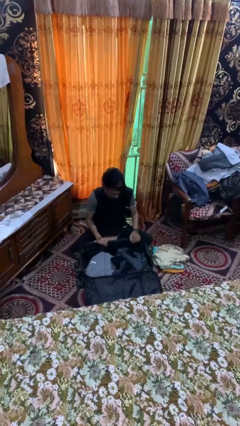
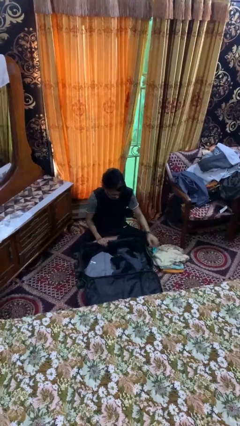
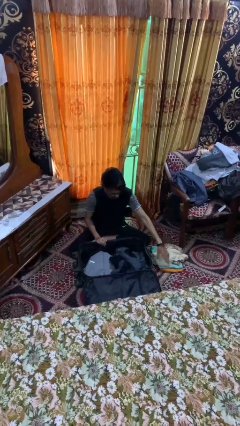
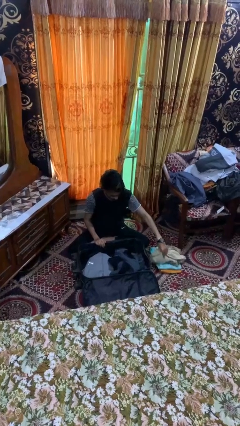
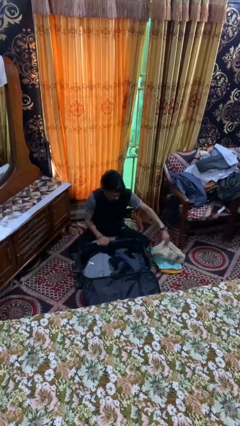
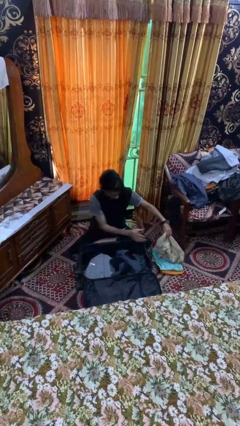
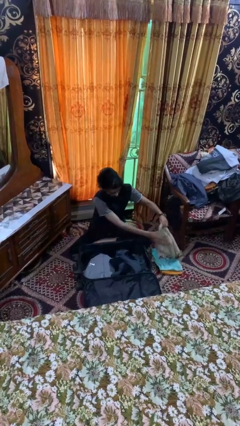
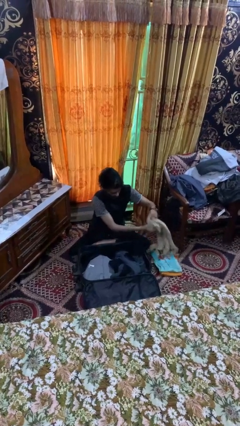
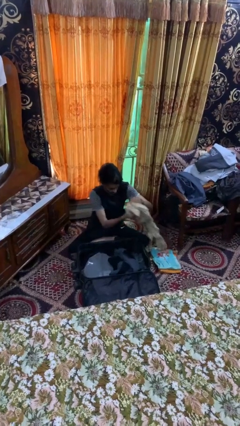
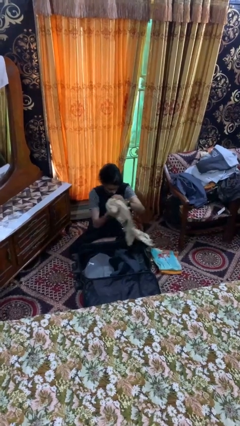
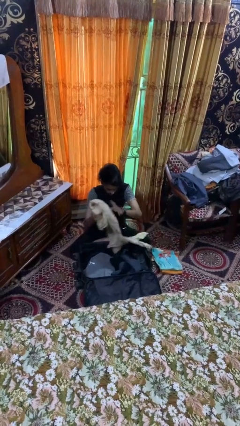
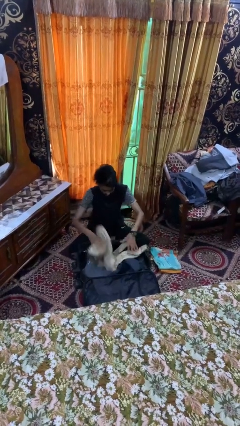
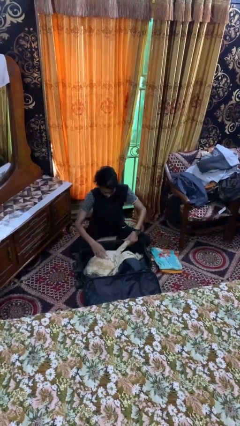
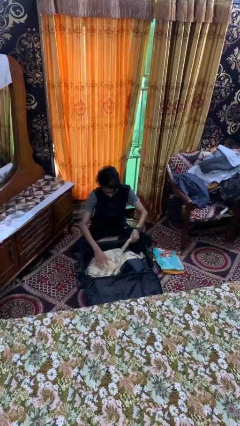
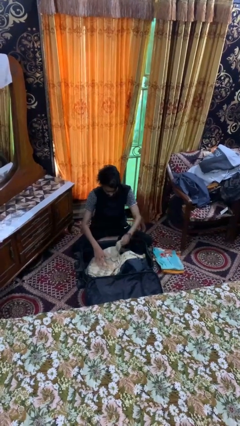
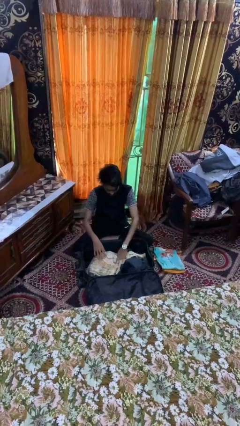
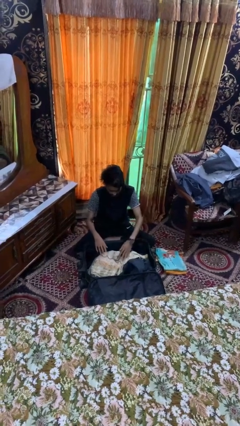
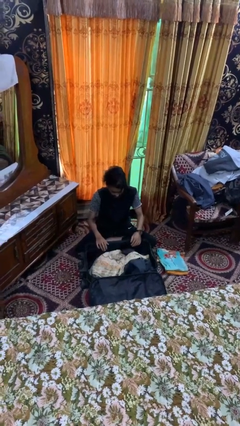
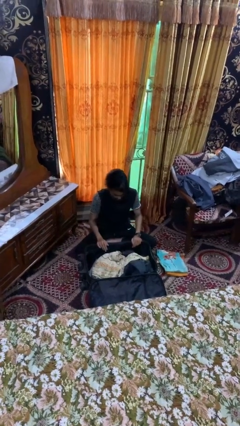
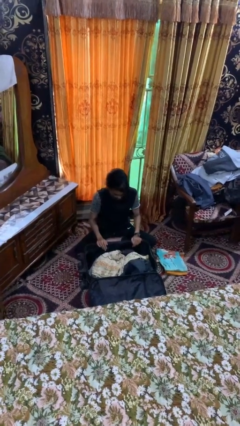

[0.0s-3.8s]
person loads clothes into suitcase

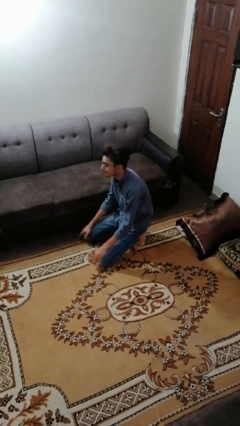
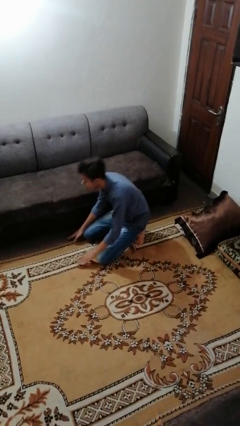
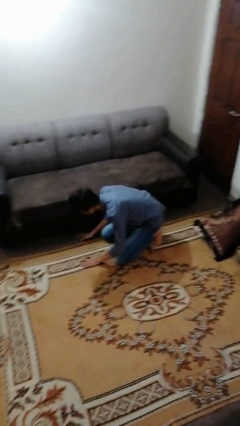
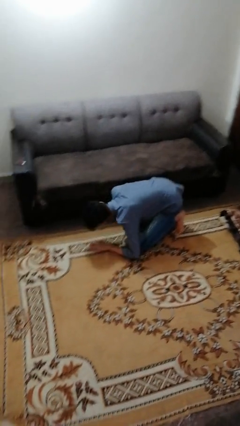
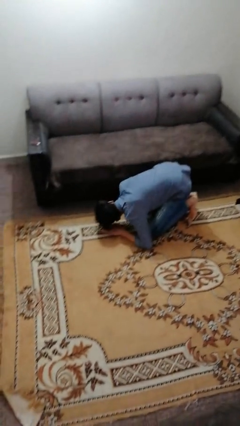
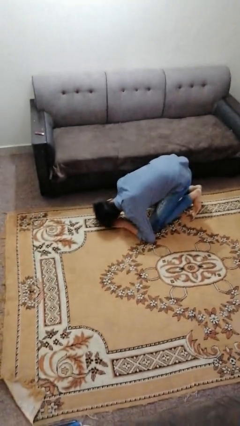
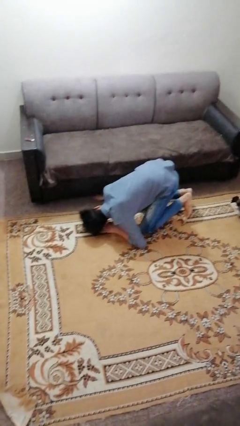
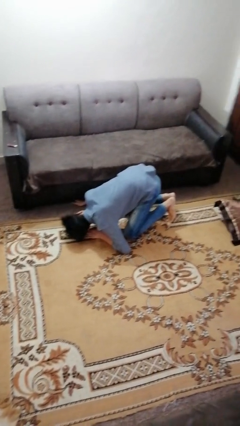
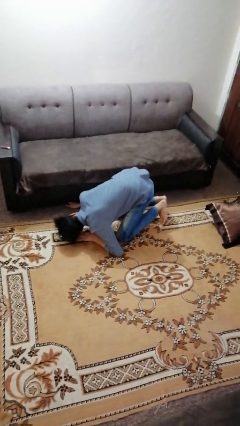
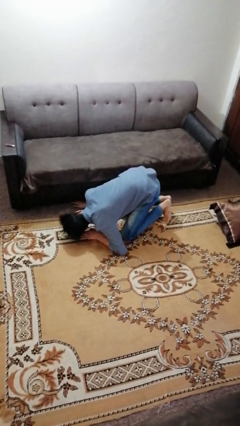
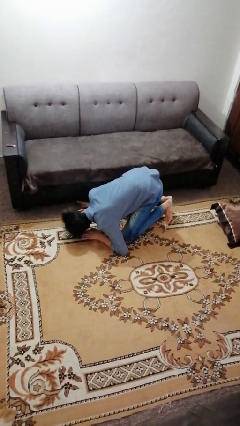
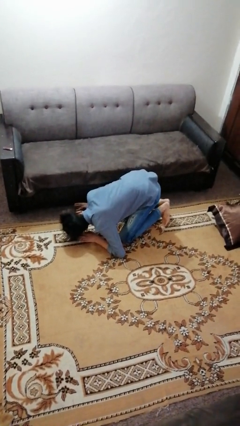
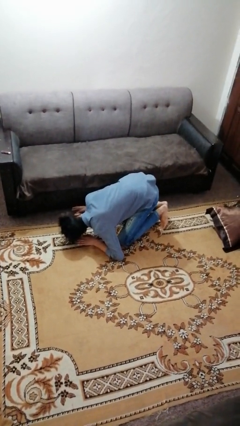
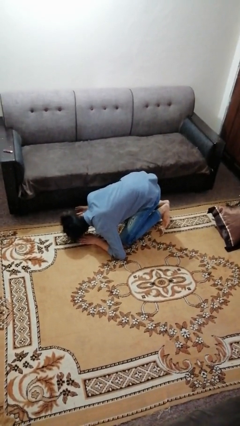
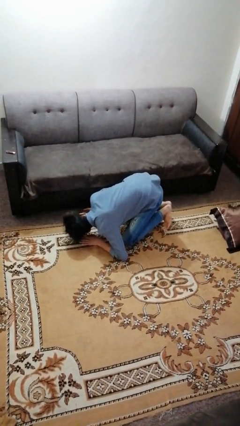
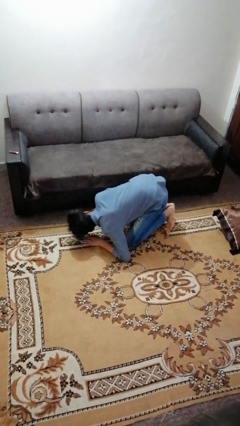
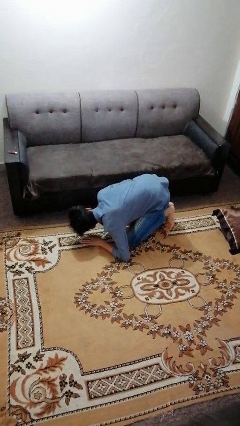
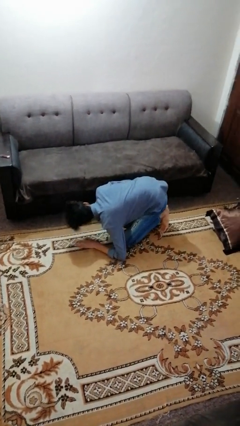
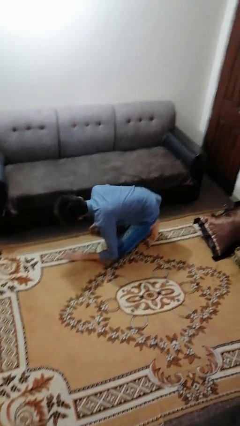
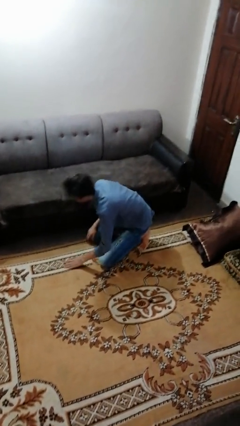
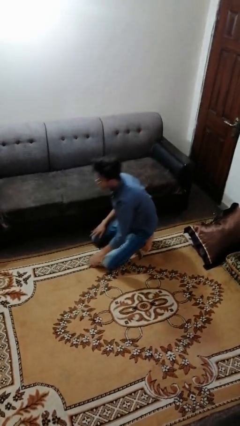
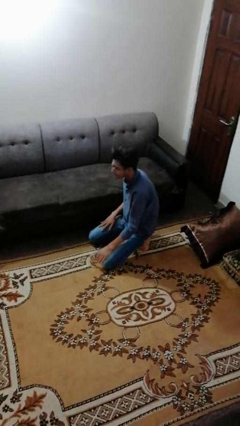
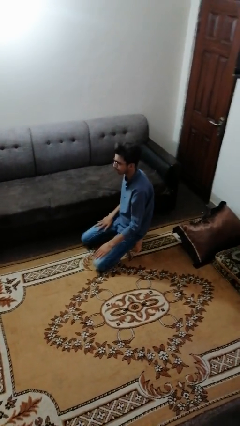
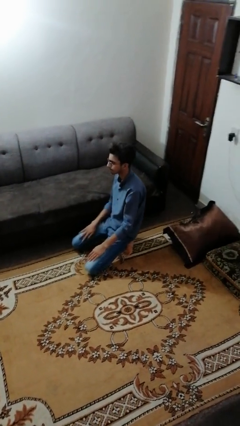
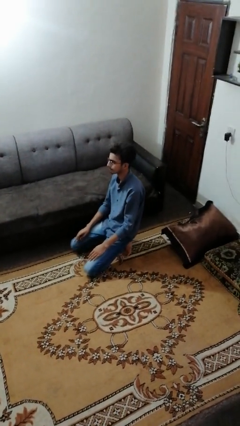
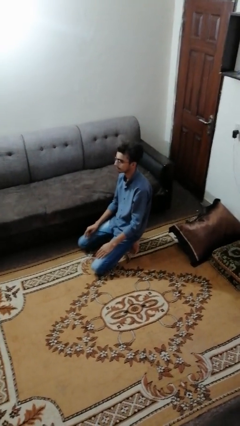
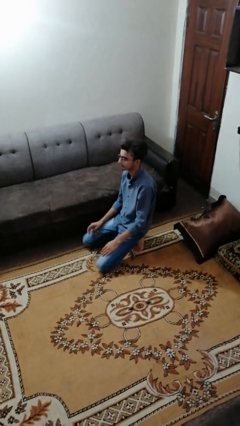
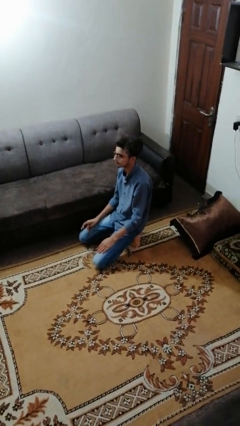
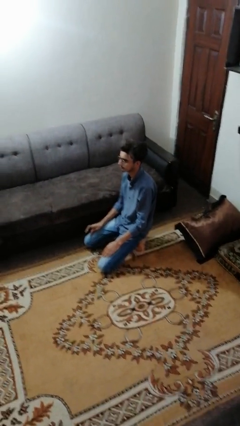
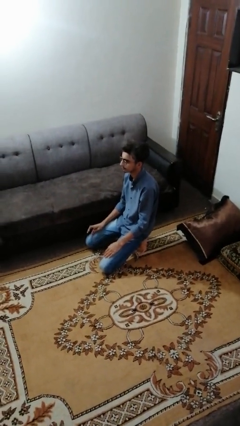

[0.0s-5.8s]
person searches under couch

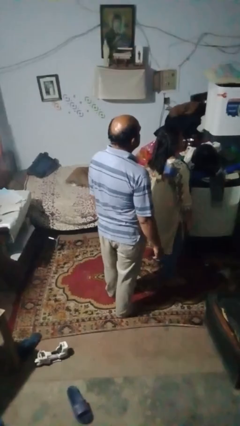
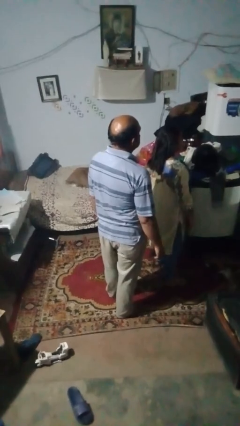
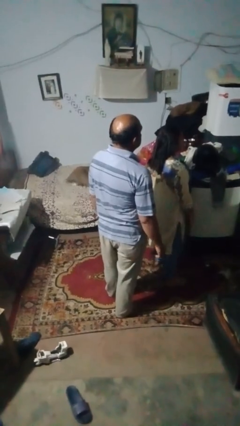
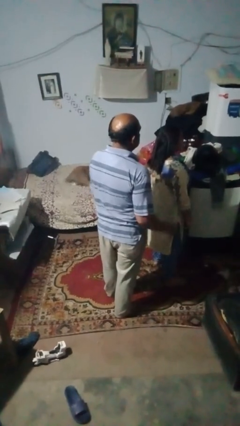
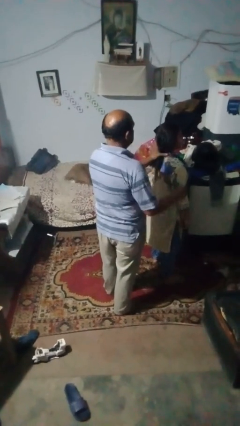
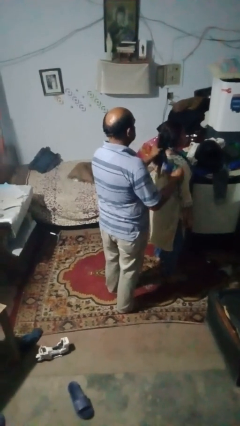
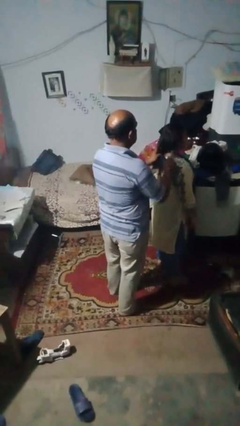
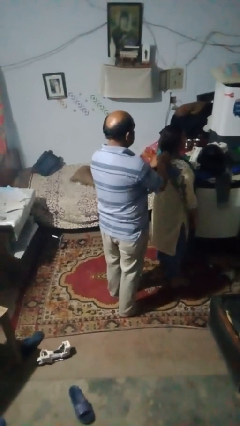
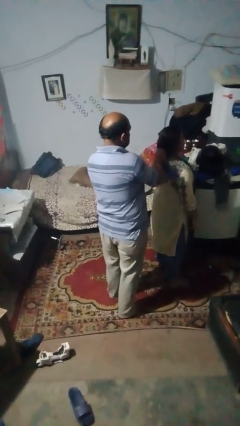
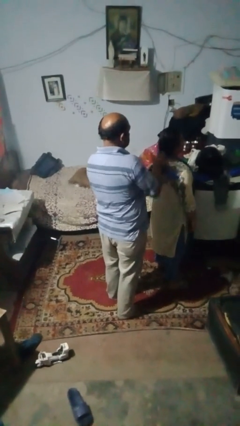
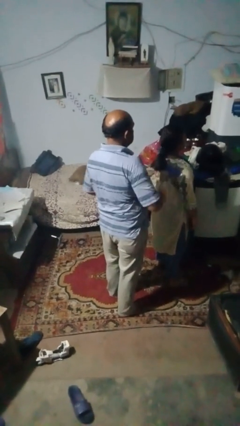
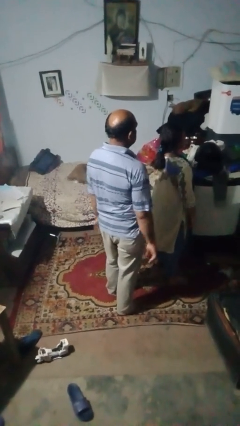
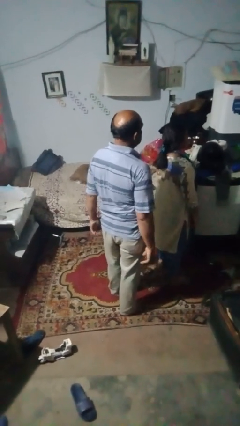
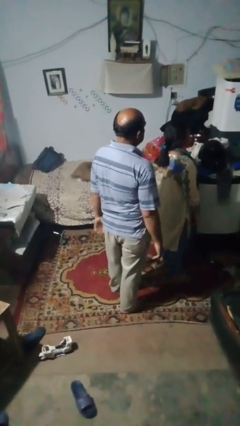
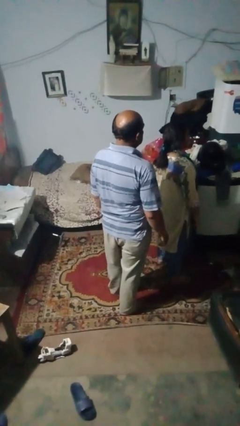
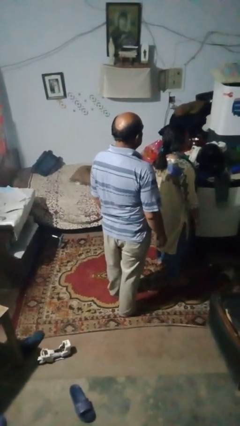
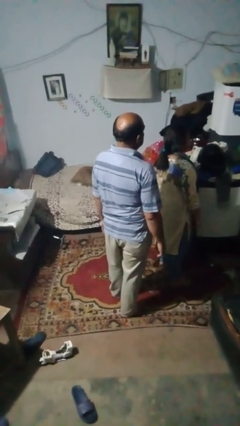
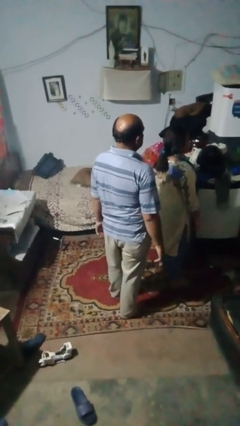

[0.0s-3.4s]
person braids hair of person

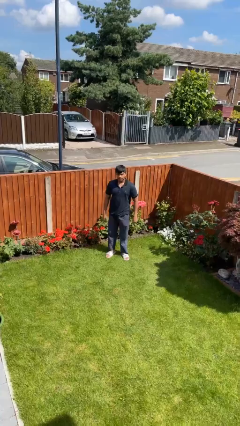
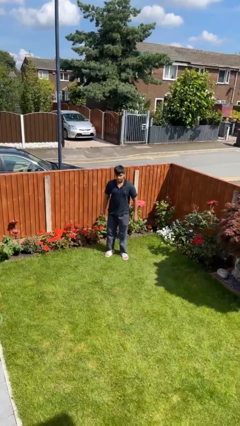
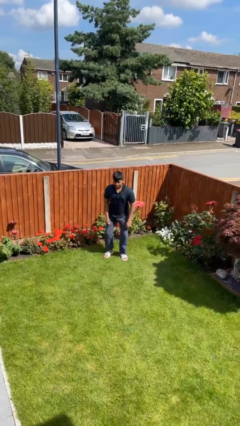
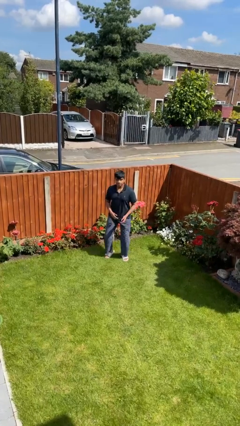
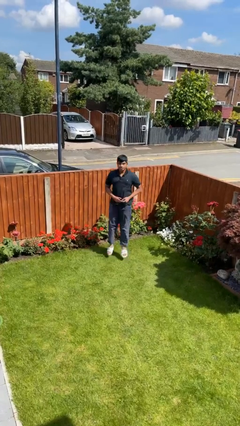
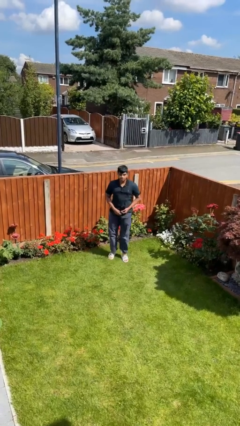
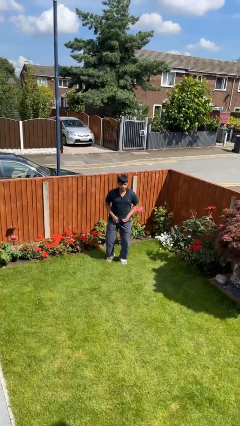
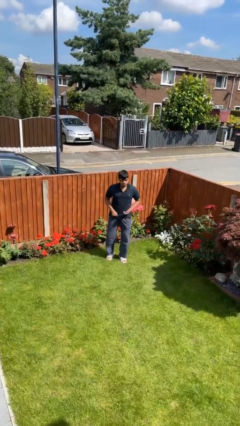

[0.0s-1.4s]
person jumps

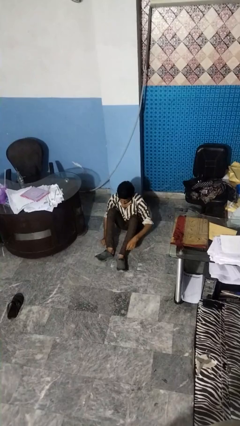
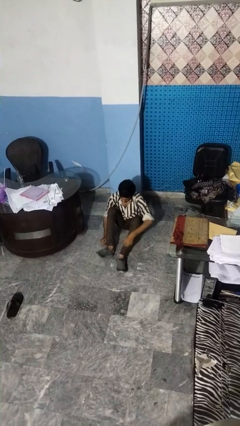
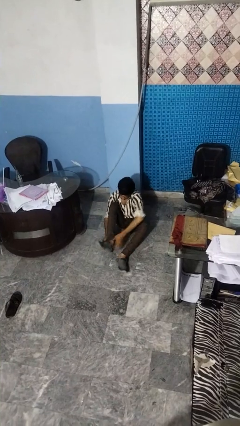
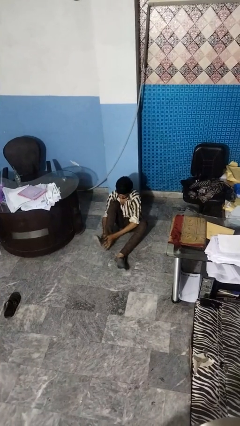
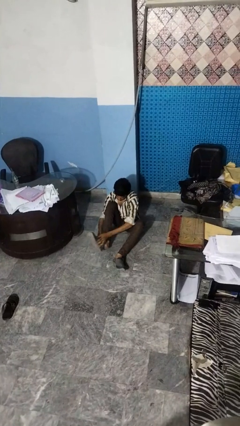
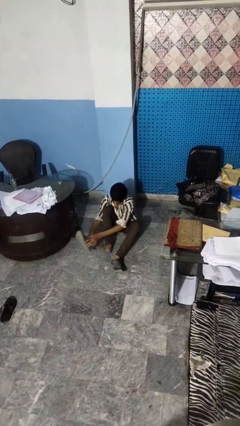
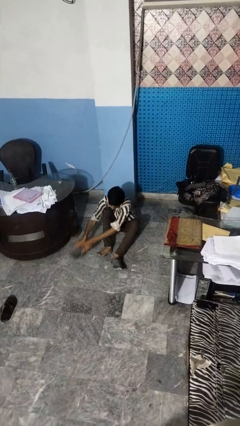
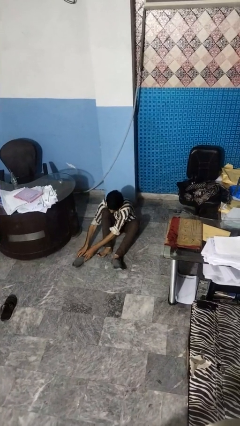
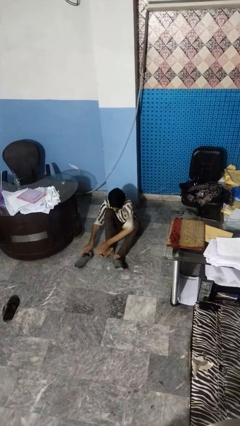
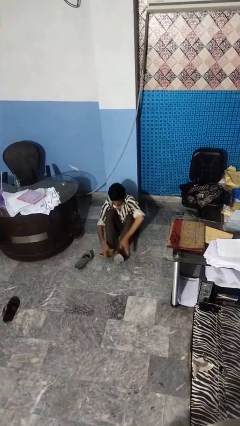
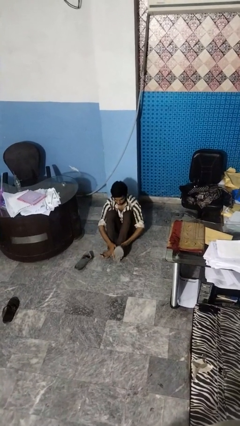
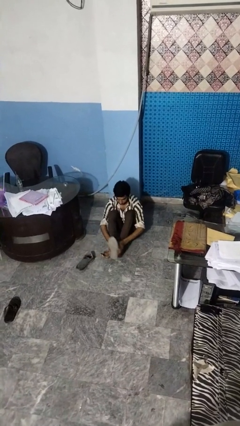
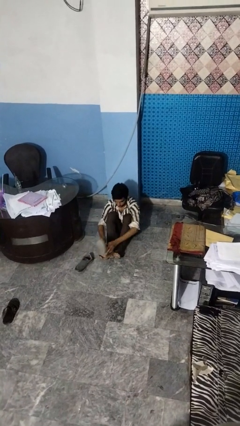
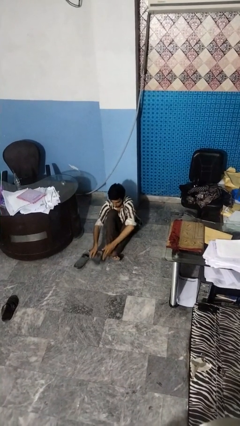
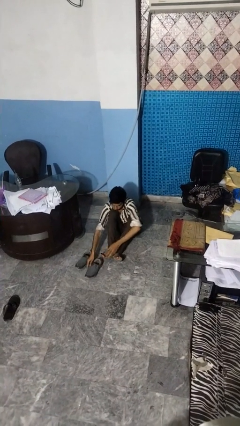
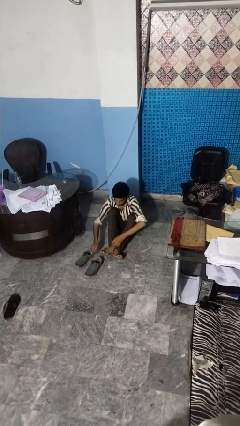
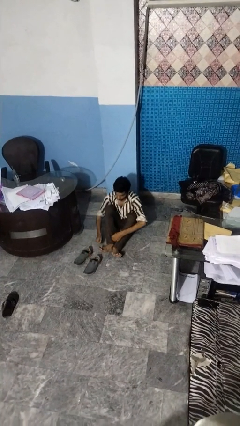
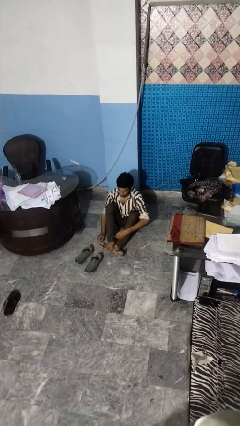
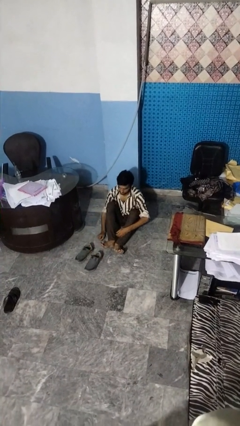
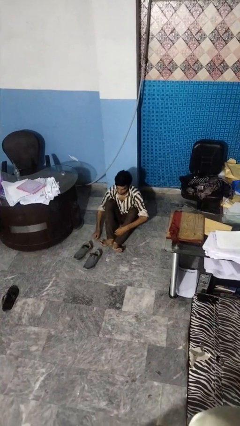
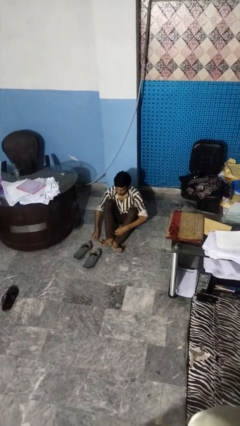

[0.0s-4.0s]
person takes off shoes
